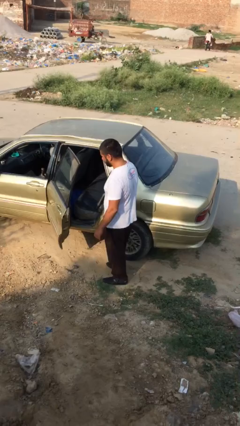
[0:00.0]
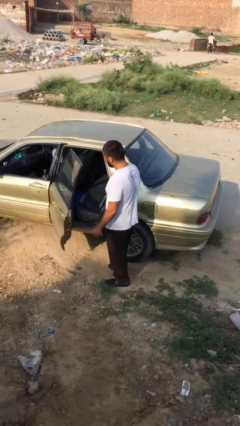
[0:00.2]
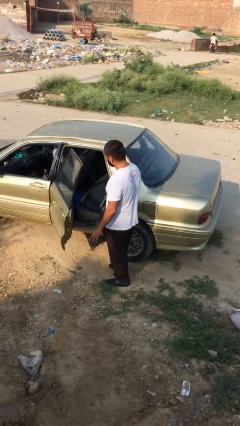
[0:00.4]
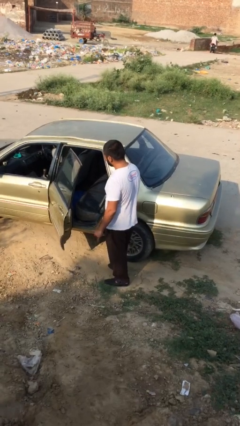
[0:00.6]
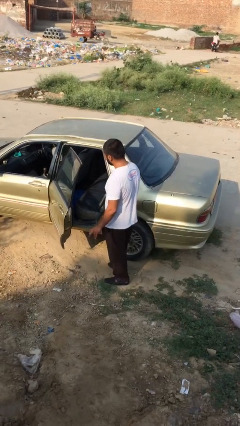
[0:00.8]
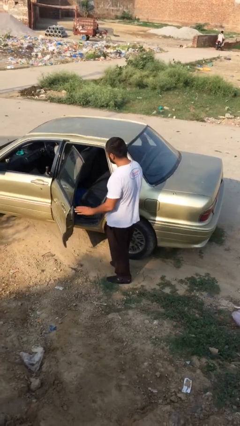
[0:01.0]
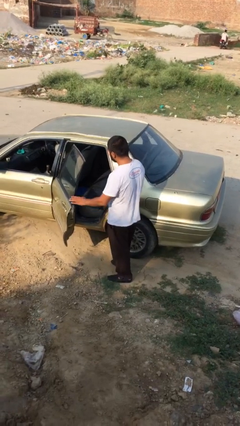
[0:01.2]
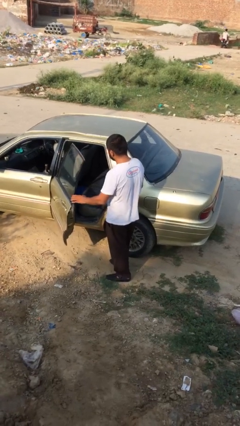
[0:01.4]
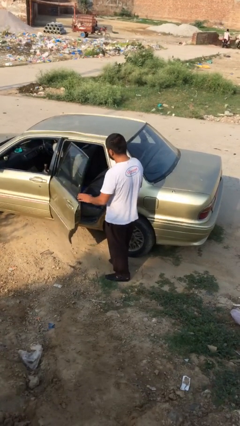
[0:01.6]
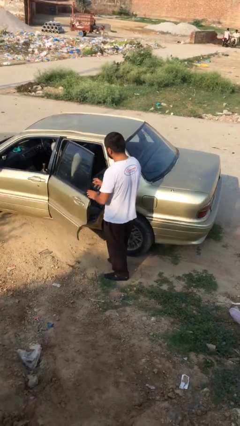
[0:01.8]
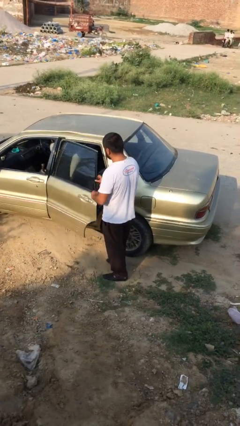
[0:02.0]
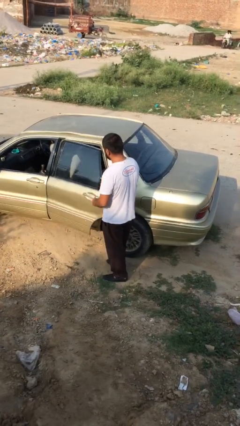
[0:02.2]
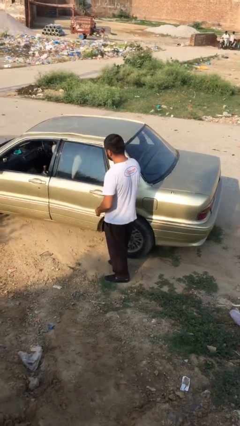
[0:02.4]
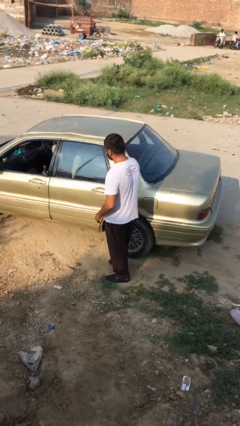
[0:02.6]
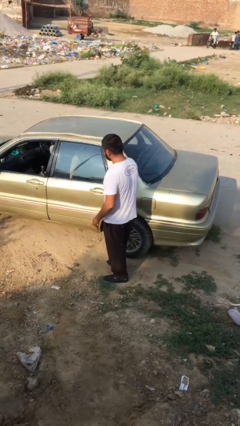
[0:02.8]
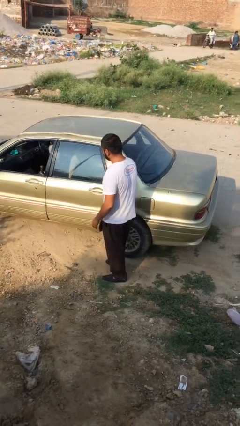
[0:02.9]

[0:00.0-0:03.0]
person closes car door

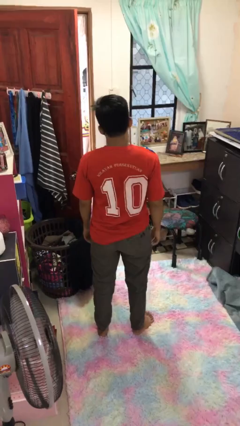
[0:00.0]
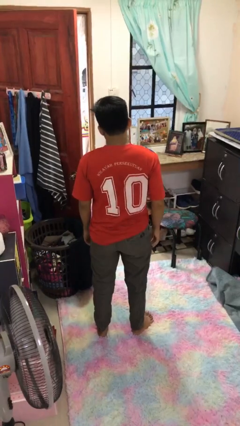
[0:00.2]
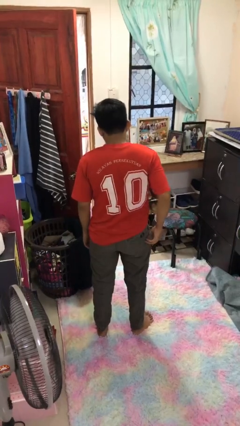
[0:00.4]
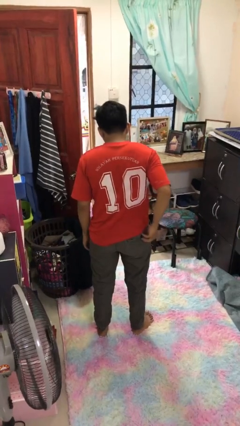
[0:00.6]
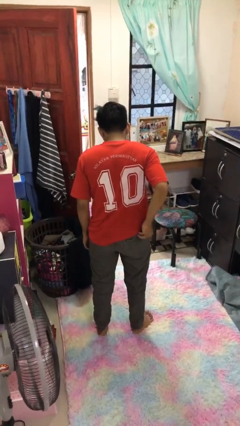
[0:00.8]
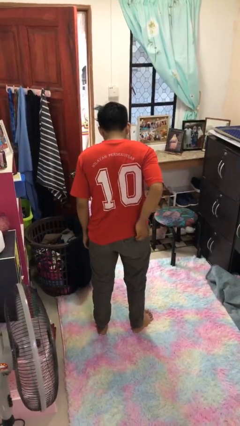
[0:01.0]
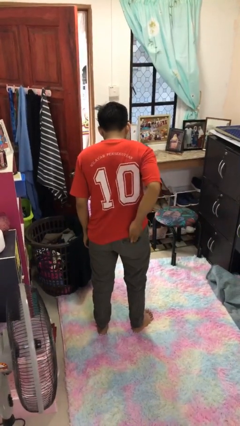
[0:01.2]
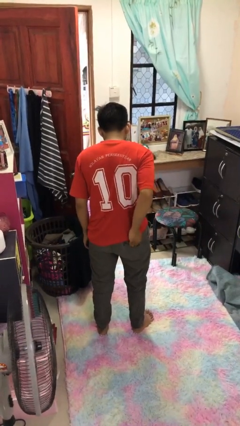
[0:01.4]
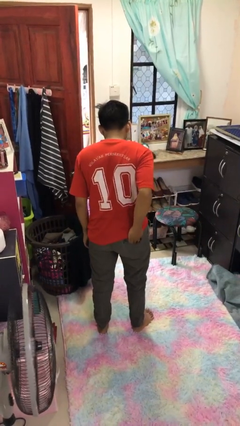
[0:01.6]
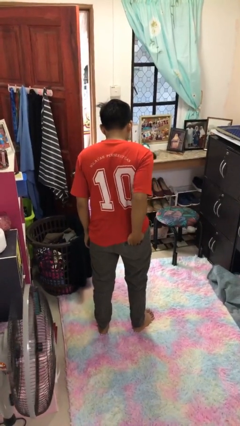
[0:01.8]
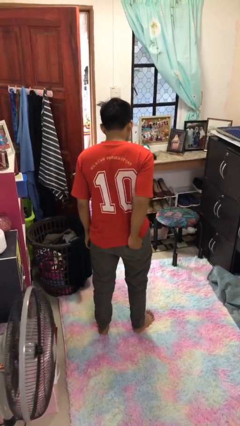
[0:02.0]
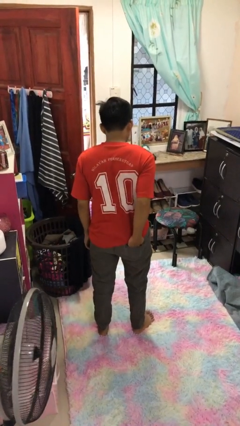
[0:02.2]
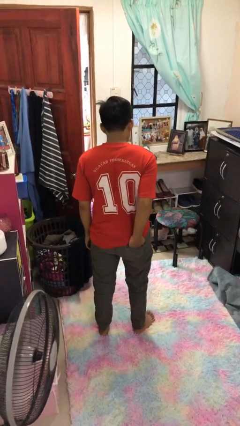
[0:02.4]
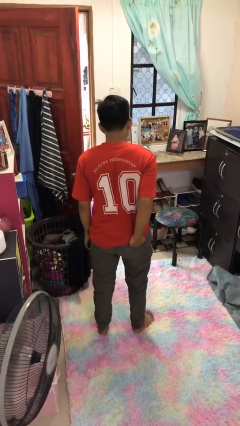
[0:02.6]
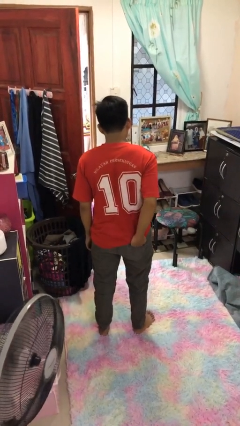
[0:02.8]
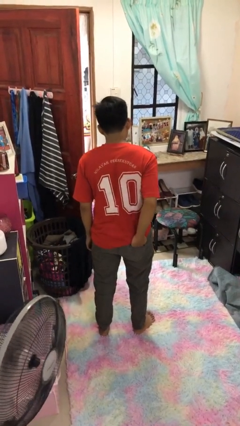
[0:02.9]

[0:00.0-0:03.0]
person puts hands in back pockets

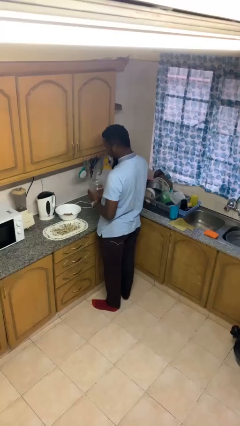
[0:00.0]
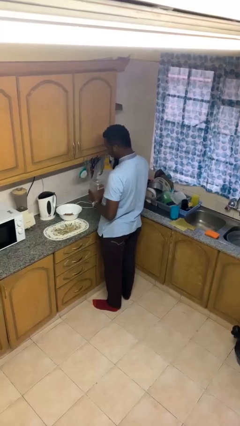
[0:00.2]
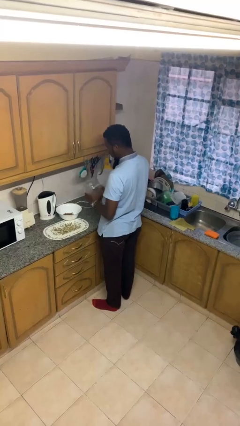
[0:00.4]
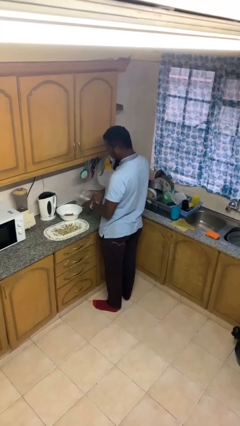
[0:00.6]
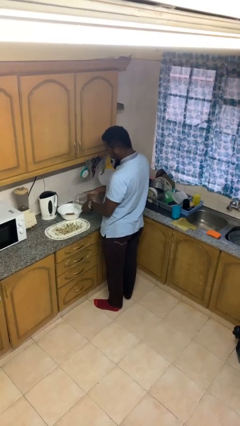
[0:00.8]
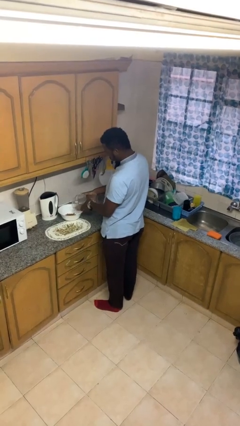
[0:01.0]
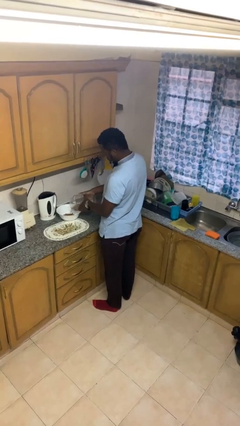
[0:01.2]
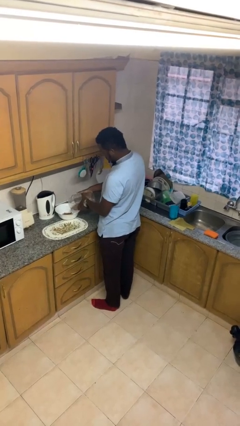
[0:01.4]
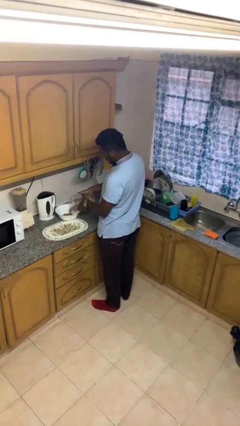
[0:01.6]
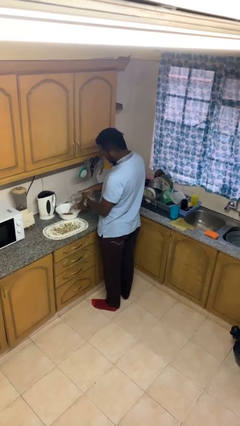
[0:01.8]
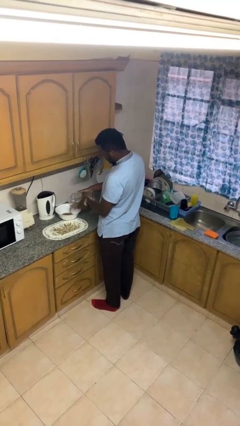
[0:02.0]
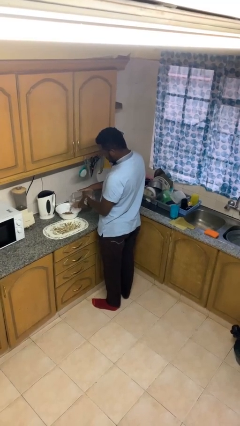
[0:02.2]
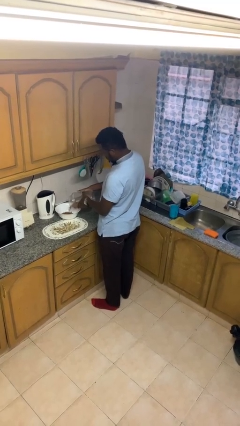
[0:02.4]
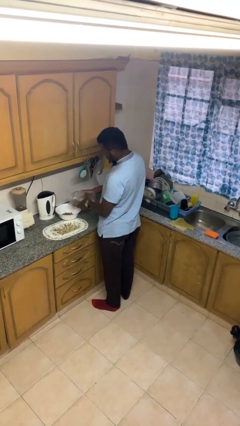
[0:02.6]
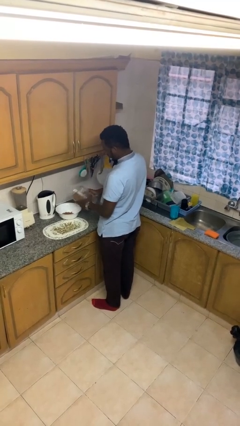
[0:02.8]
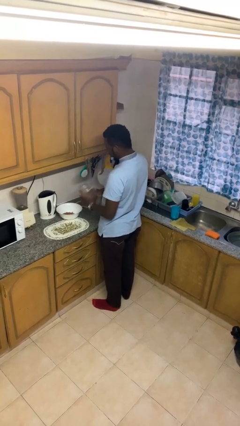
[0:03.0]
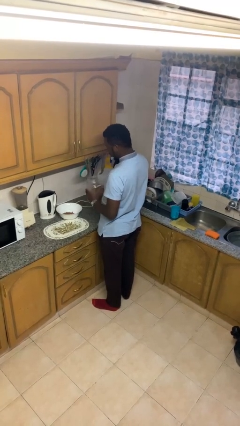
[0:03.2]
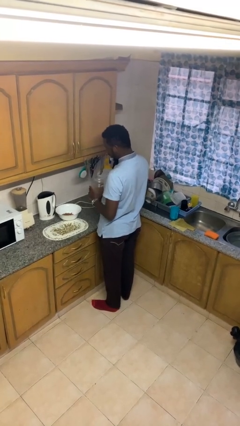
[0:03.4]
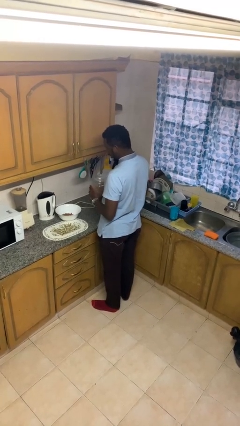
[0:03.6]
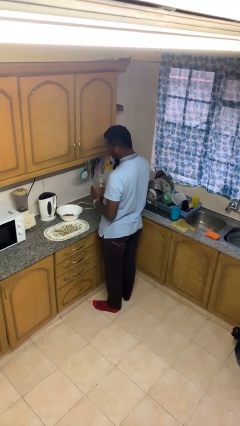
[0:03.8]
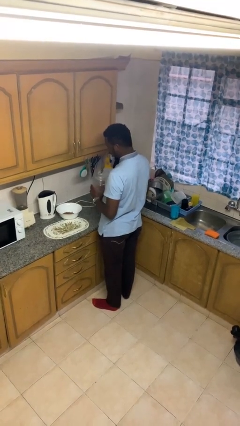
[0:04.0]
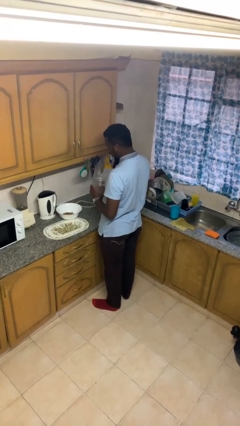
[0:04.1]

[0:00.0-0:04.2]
person pours into bowl

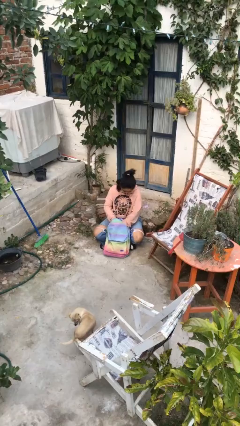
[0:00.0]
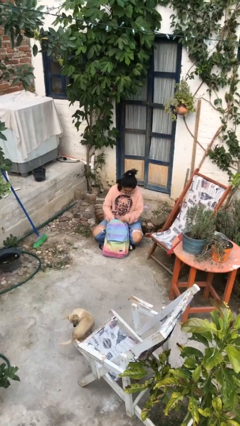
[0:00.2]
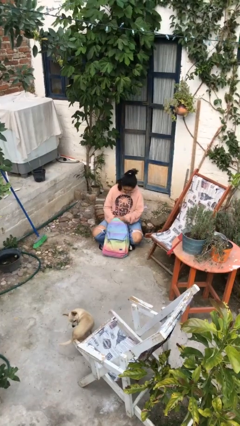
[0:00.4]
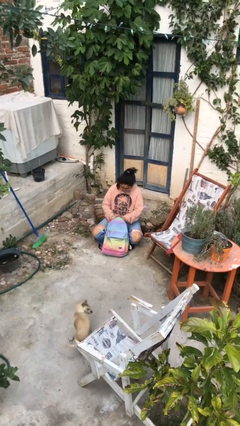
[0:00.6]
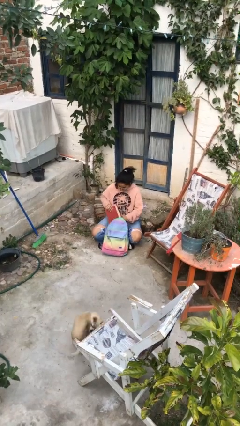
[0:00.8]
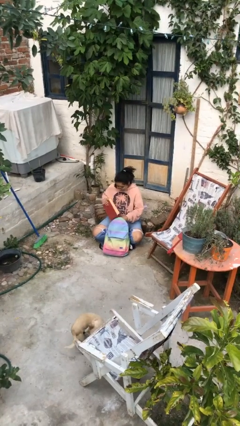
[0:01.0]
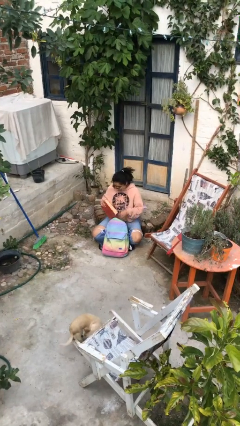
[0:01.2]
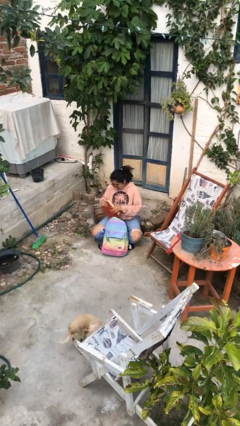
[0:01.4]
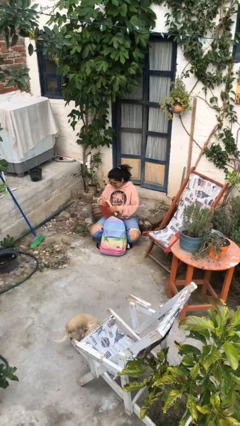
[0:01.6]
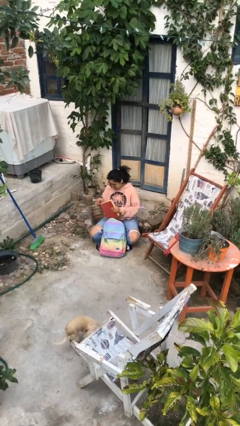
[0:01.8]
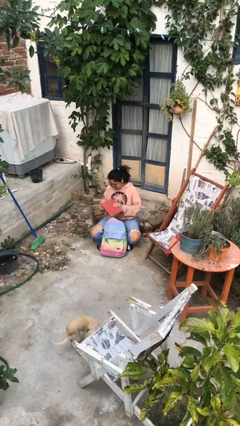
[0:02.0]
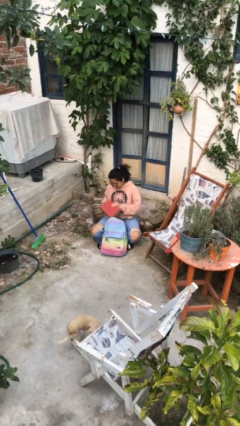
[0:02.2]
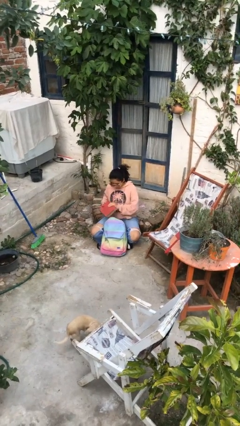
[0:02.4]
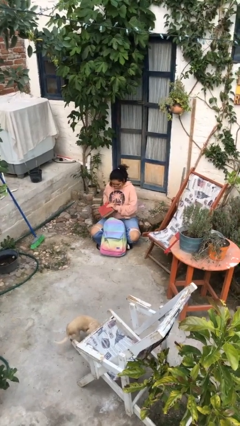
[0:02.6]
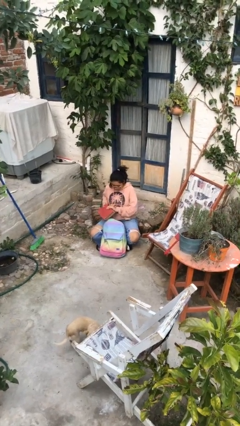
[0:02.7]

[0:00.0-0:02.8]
person takes object from backpack

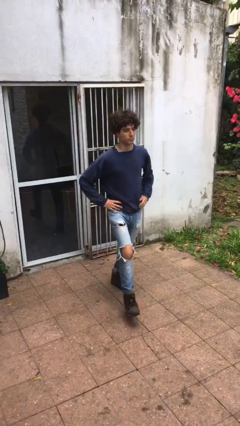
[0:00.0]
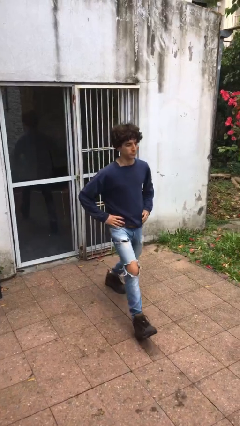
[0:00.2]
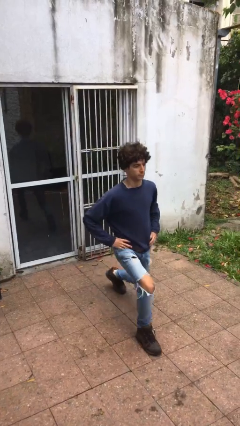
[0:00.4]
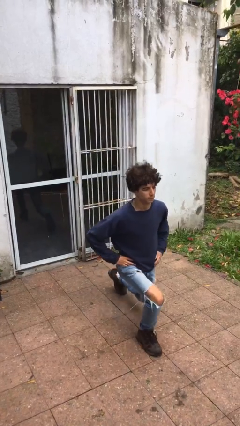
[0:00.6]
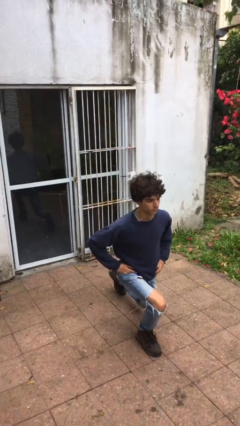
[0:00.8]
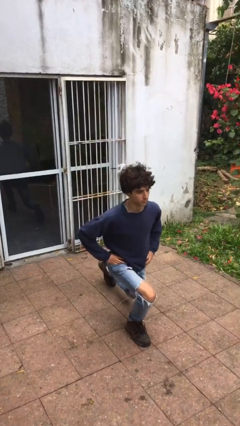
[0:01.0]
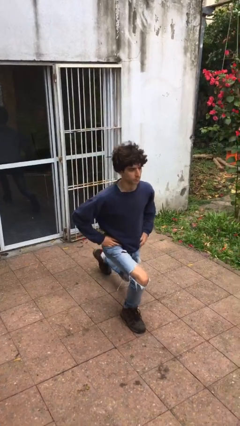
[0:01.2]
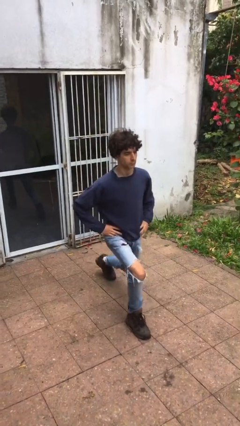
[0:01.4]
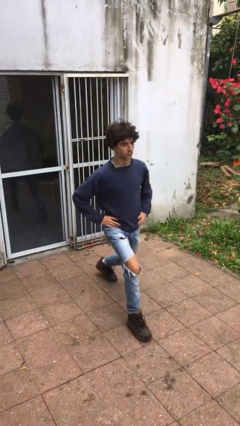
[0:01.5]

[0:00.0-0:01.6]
person exercises with lunges

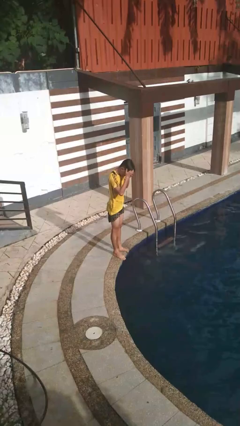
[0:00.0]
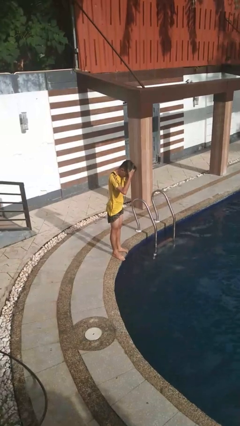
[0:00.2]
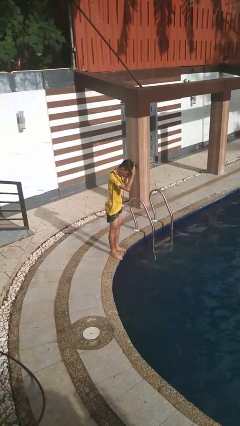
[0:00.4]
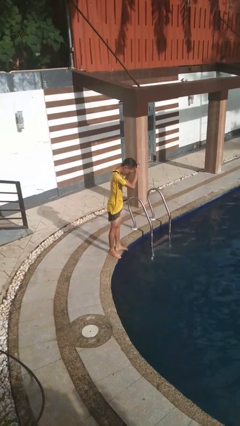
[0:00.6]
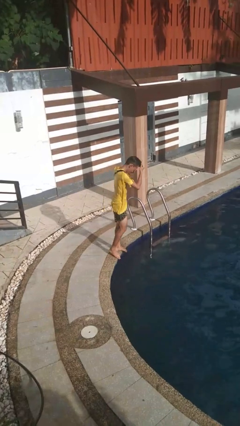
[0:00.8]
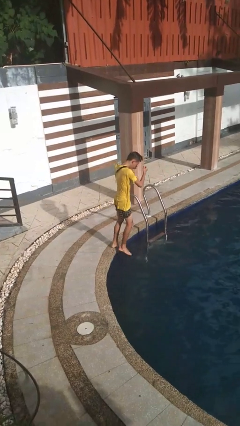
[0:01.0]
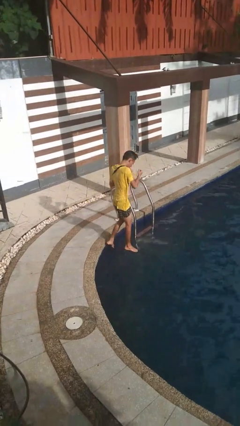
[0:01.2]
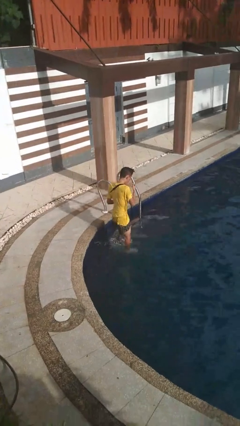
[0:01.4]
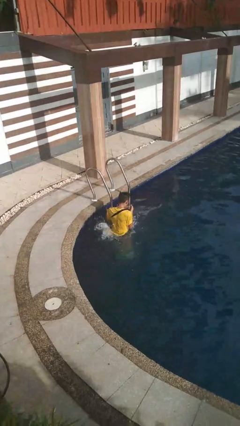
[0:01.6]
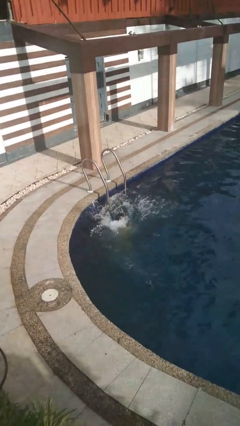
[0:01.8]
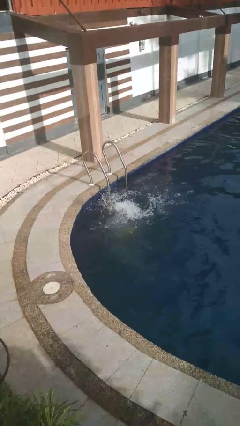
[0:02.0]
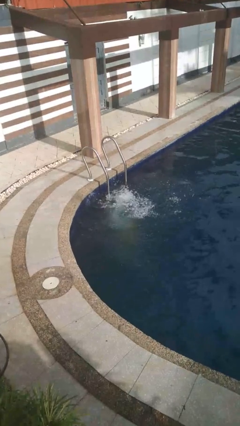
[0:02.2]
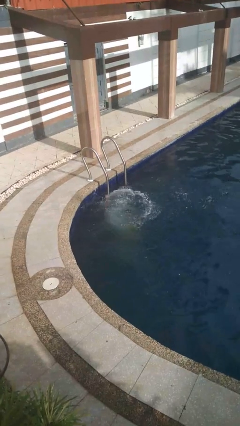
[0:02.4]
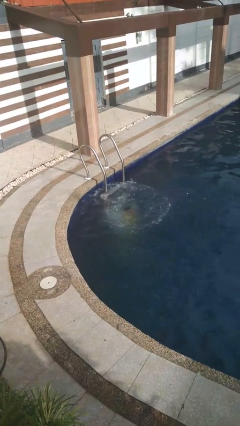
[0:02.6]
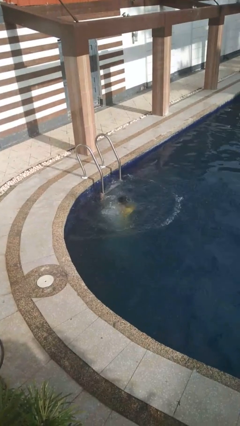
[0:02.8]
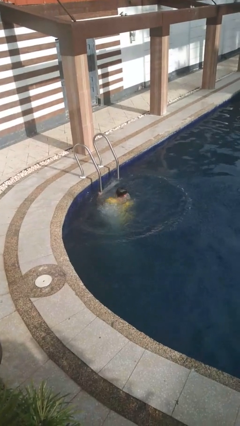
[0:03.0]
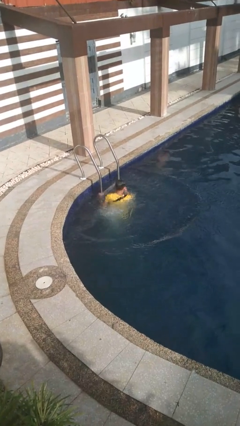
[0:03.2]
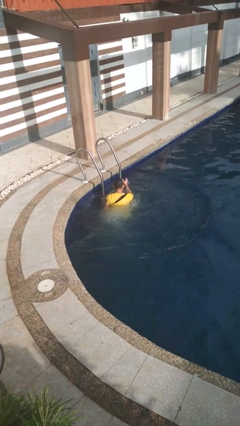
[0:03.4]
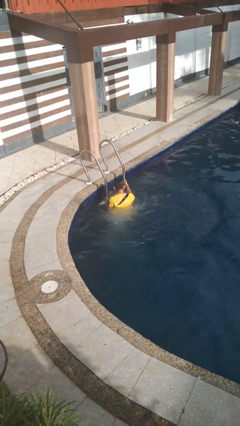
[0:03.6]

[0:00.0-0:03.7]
person falls into pool
